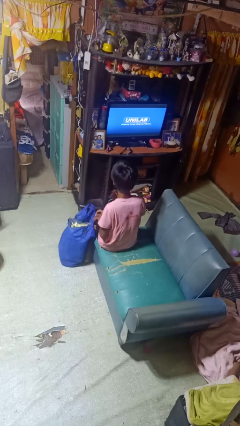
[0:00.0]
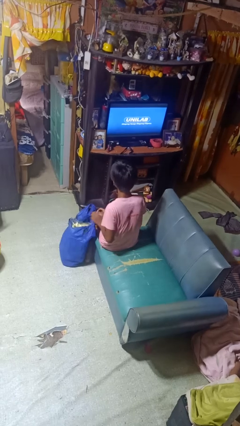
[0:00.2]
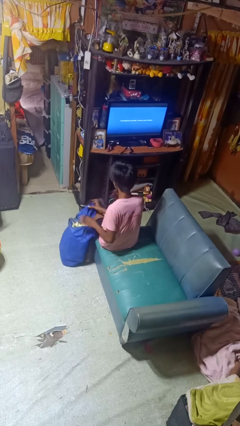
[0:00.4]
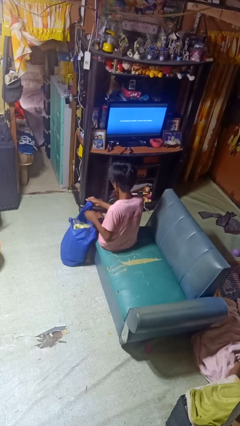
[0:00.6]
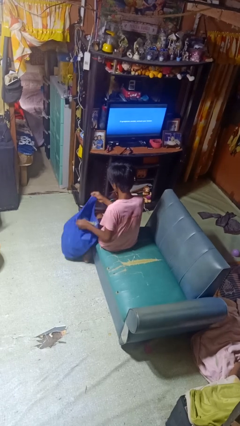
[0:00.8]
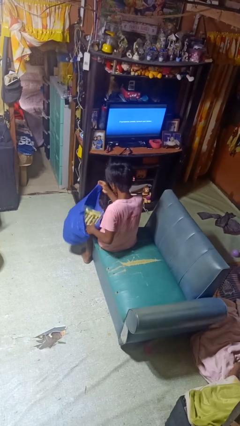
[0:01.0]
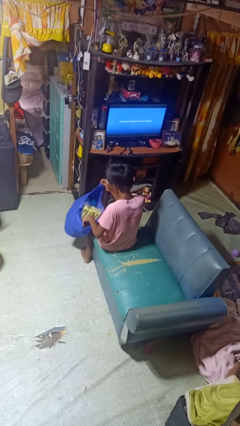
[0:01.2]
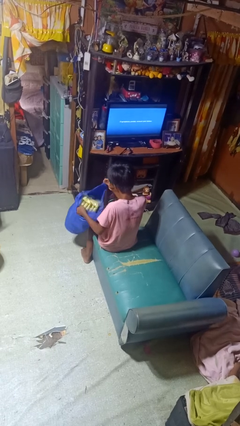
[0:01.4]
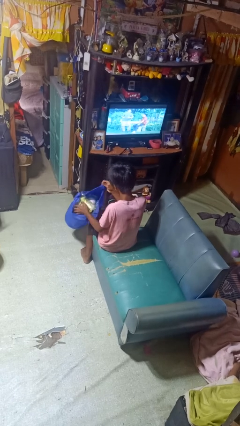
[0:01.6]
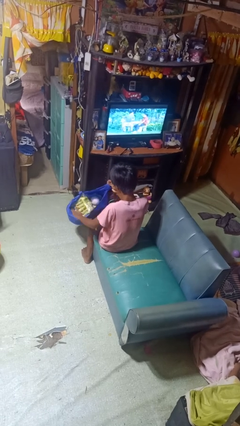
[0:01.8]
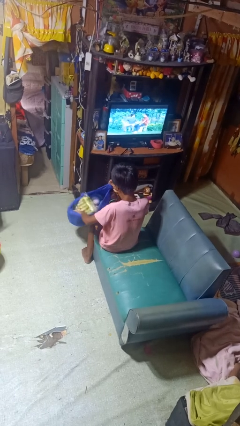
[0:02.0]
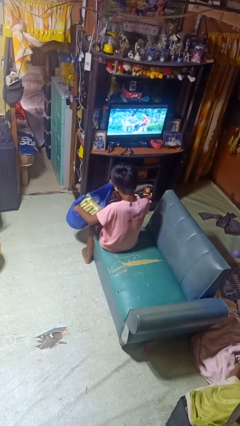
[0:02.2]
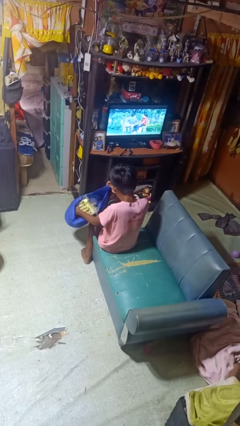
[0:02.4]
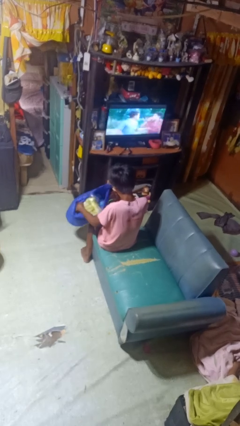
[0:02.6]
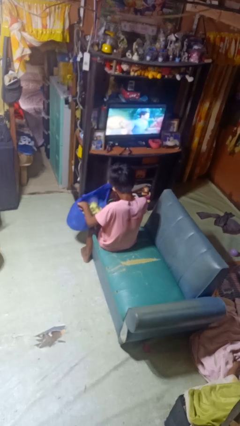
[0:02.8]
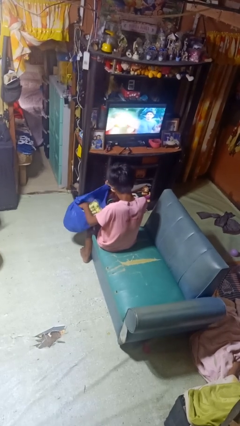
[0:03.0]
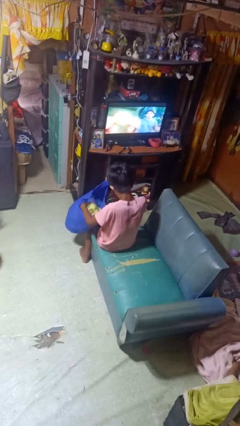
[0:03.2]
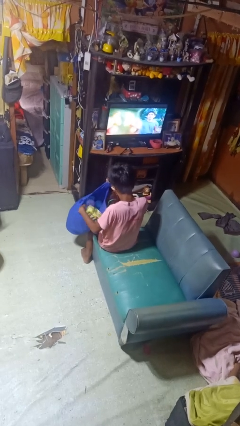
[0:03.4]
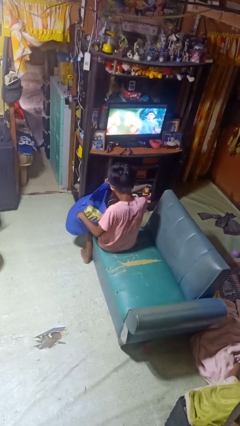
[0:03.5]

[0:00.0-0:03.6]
person searches in bag

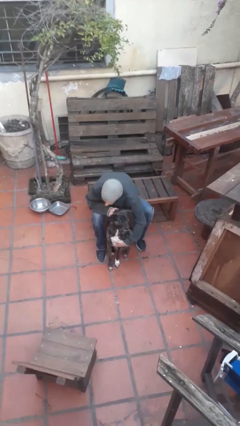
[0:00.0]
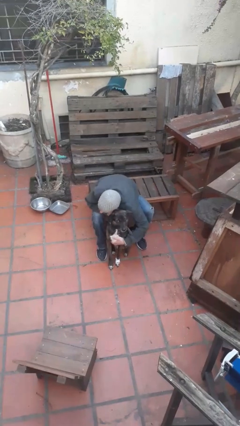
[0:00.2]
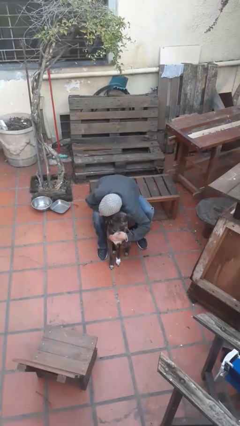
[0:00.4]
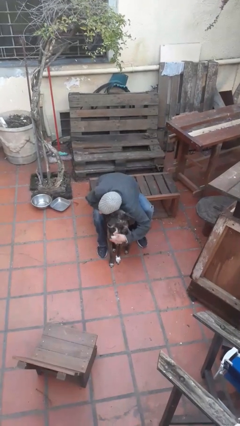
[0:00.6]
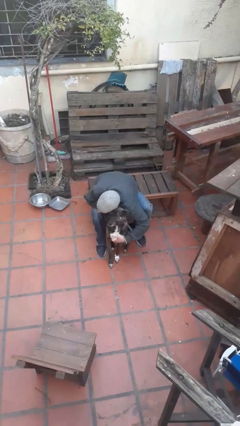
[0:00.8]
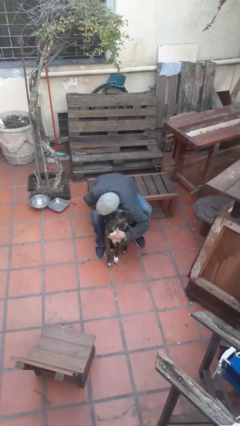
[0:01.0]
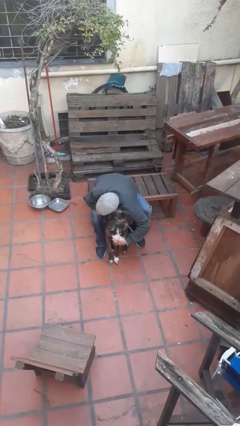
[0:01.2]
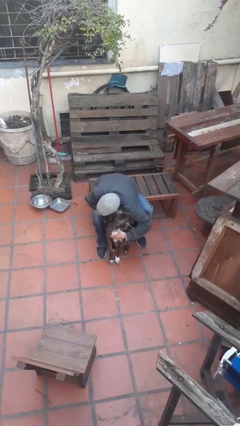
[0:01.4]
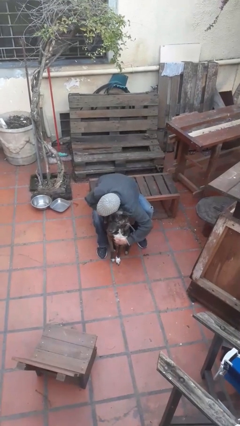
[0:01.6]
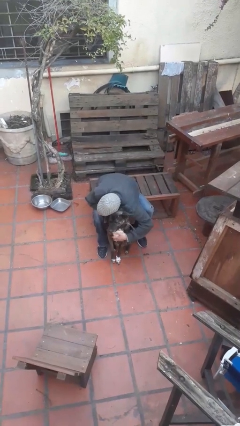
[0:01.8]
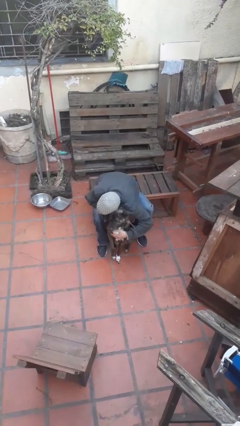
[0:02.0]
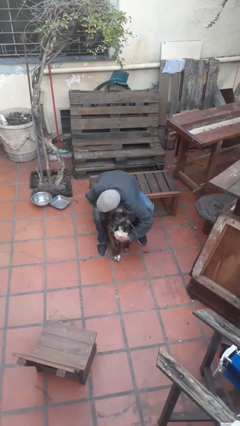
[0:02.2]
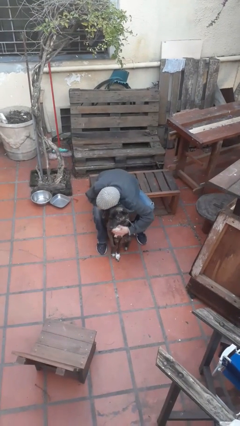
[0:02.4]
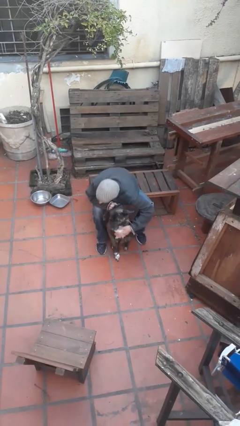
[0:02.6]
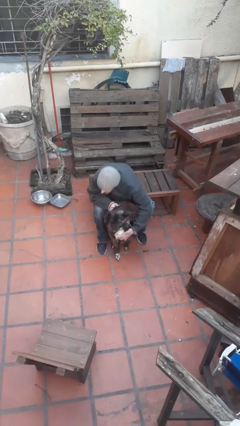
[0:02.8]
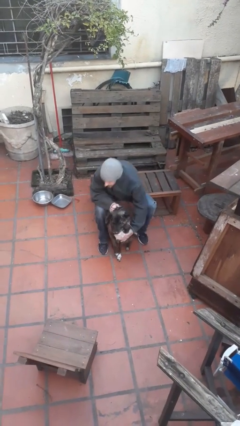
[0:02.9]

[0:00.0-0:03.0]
person hugs dog

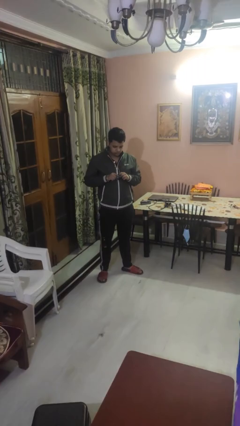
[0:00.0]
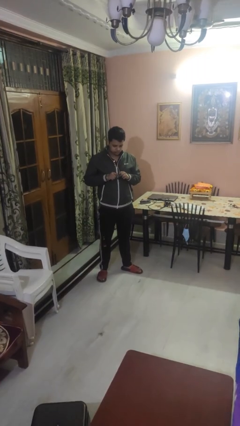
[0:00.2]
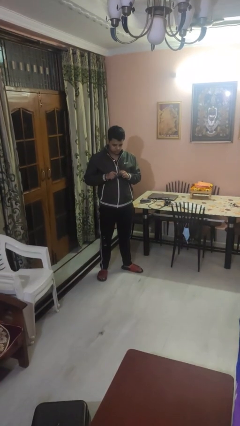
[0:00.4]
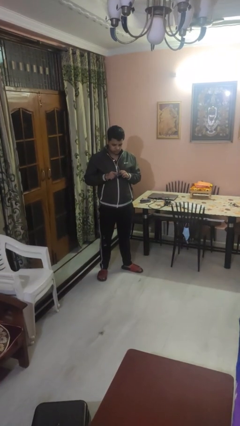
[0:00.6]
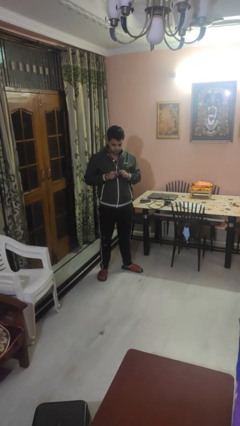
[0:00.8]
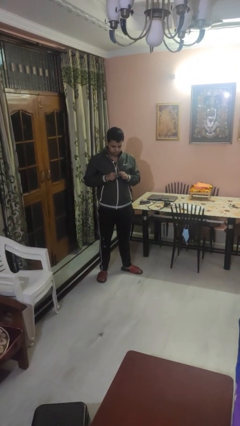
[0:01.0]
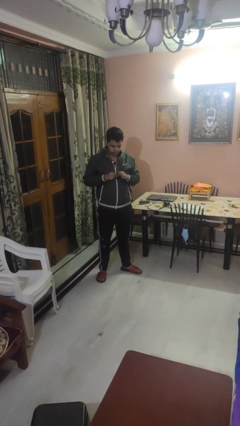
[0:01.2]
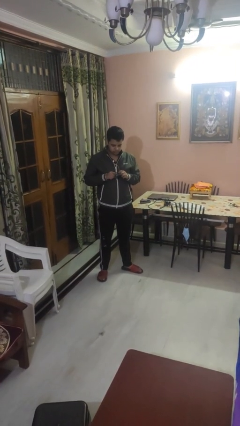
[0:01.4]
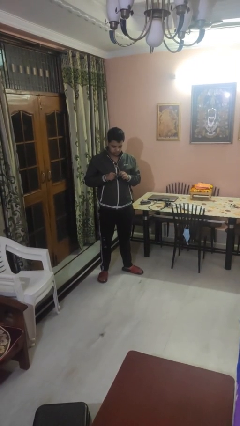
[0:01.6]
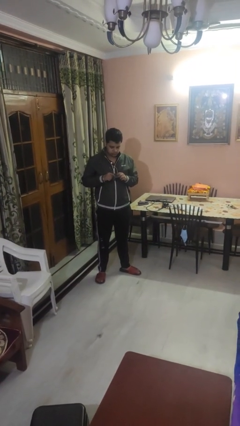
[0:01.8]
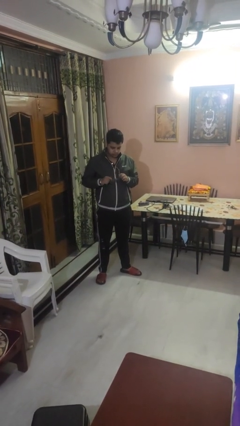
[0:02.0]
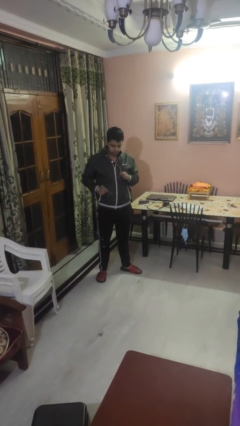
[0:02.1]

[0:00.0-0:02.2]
person cleans eyeglasses

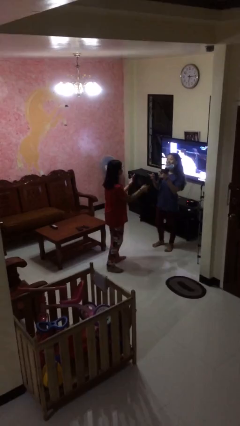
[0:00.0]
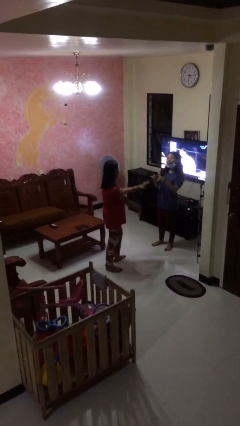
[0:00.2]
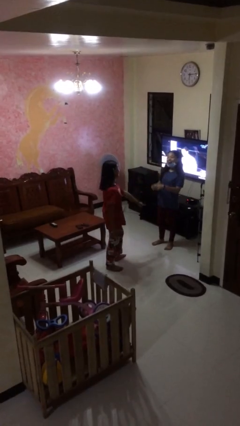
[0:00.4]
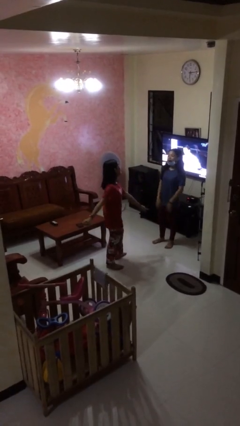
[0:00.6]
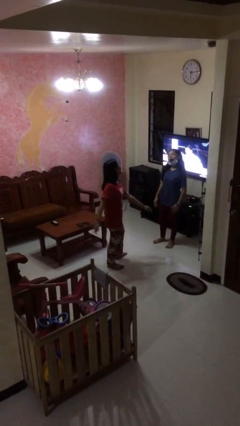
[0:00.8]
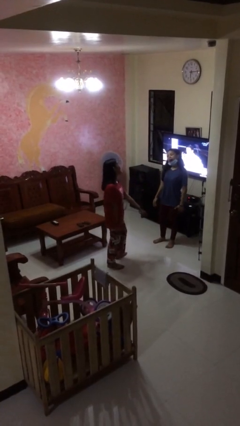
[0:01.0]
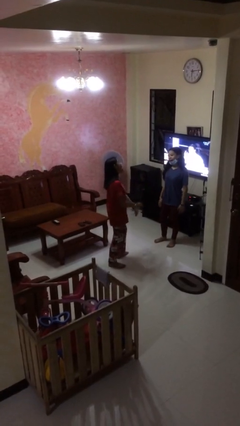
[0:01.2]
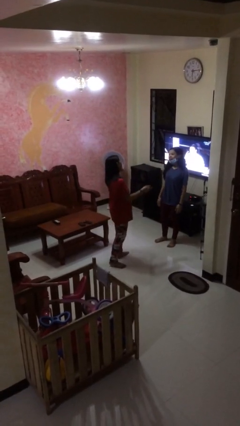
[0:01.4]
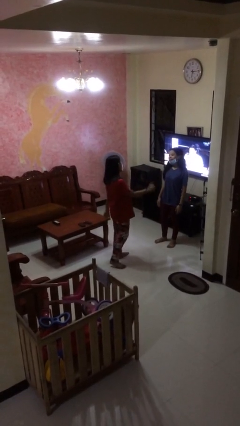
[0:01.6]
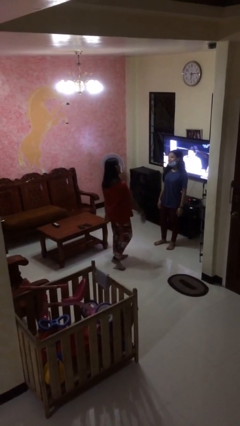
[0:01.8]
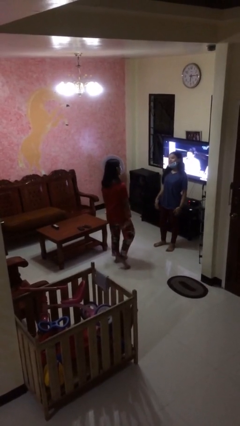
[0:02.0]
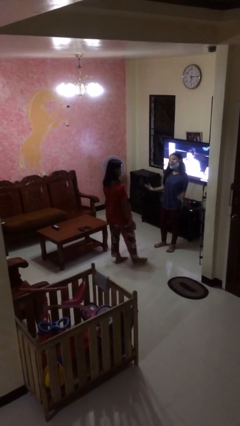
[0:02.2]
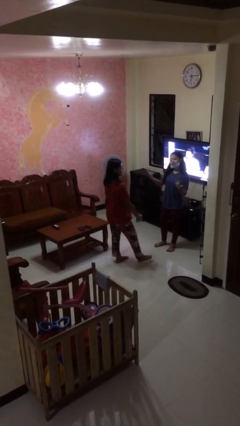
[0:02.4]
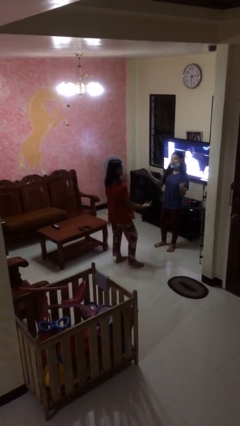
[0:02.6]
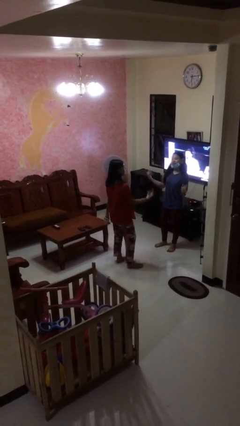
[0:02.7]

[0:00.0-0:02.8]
person talks to person

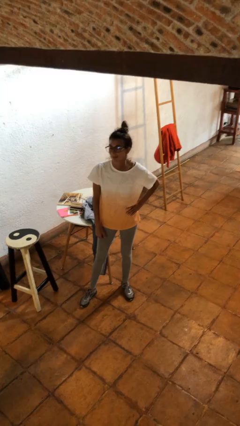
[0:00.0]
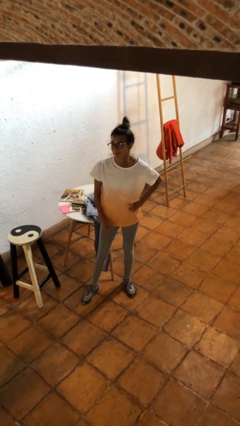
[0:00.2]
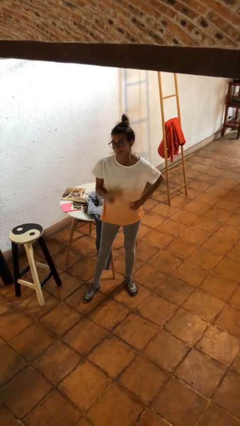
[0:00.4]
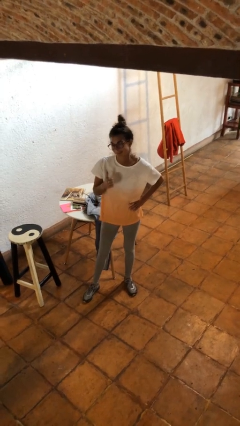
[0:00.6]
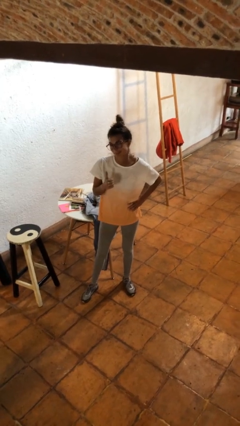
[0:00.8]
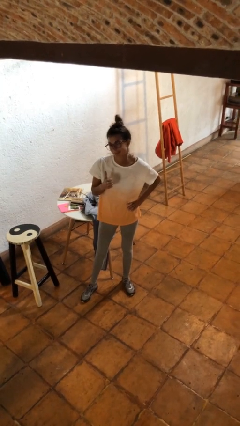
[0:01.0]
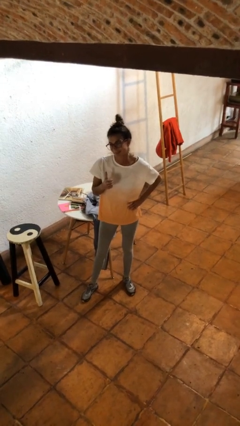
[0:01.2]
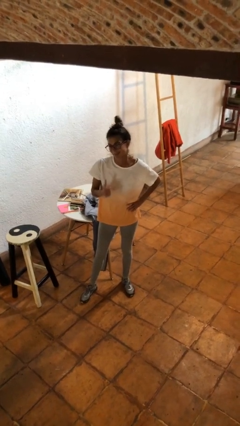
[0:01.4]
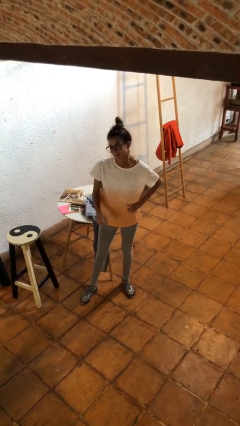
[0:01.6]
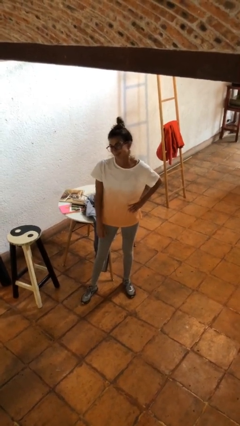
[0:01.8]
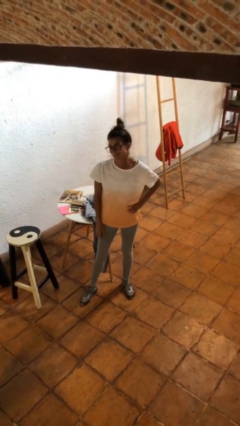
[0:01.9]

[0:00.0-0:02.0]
person gestures thumbs up

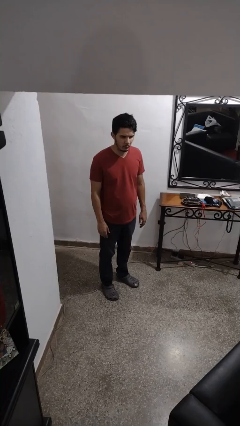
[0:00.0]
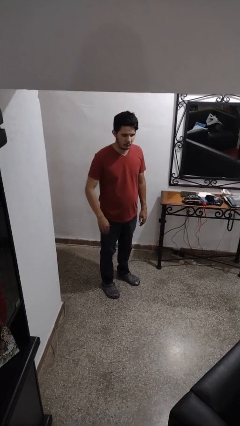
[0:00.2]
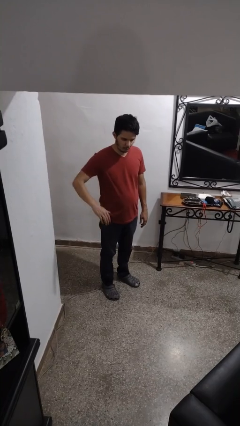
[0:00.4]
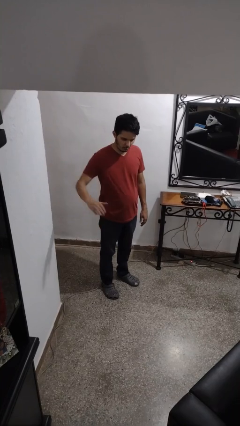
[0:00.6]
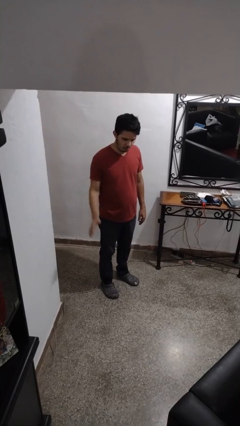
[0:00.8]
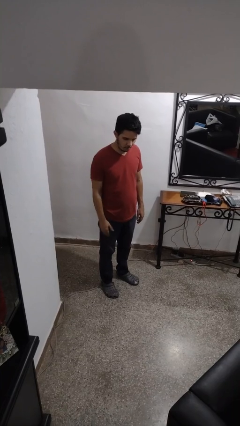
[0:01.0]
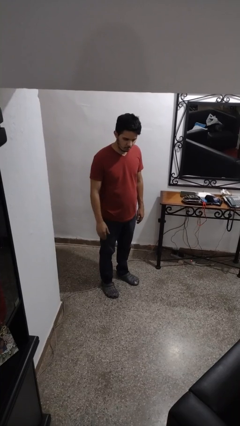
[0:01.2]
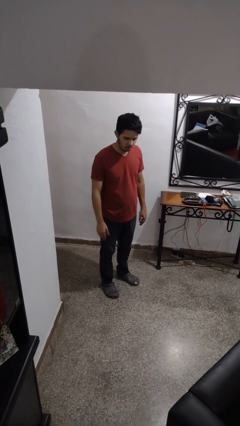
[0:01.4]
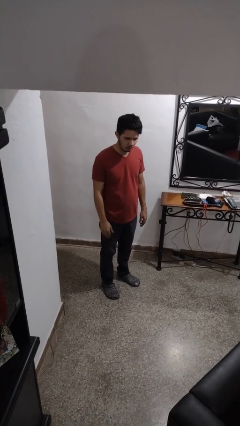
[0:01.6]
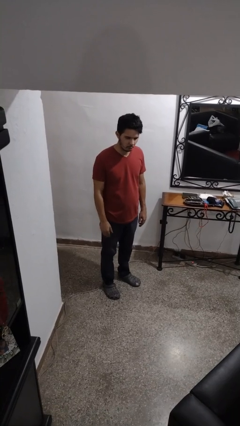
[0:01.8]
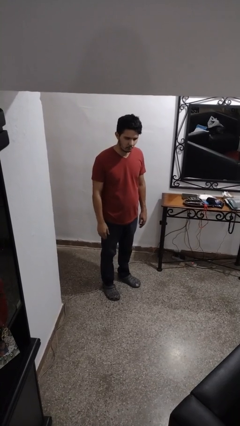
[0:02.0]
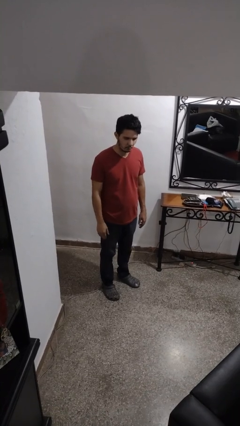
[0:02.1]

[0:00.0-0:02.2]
person slaps hands on thighs

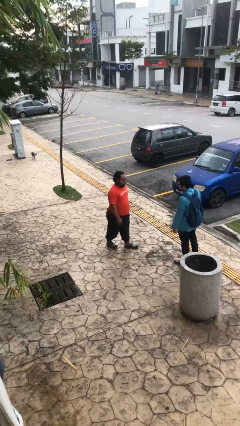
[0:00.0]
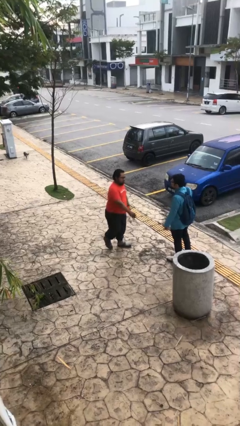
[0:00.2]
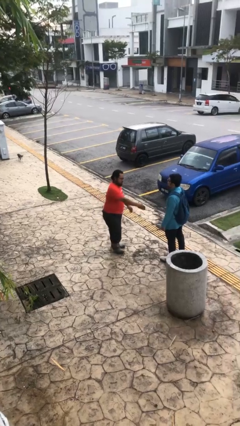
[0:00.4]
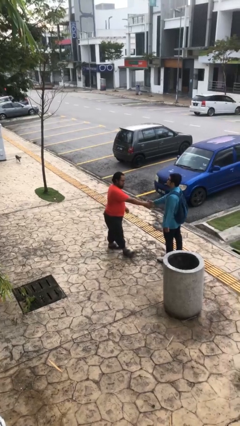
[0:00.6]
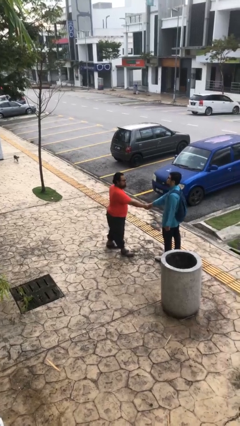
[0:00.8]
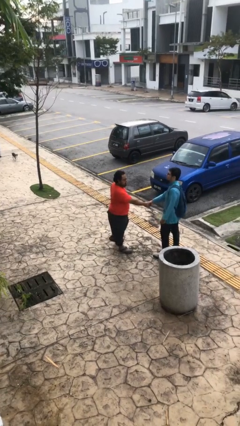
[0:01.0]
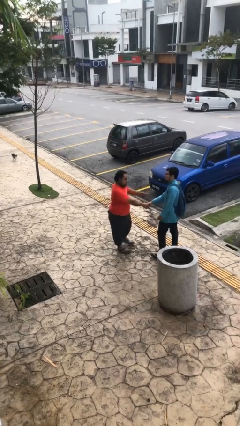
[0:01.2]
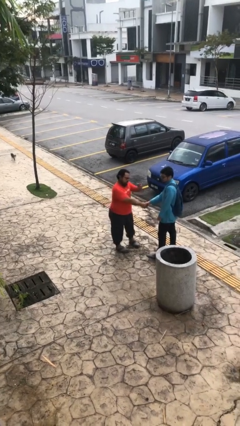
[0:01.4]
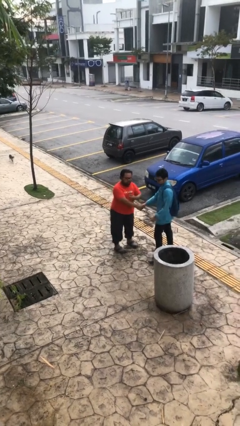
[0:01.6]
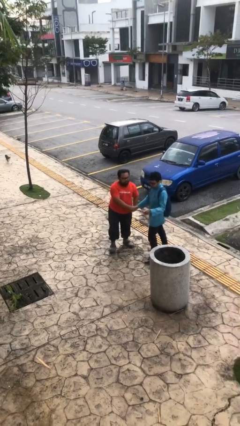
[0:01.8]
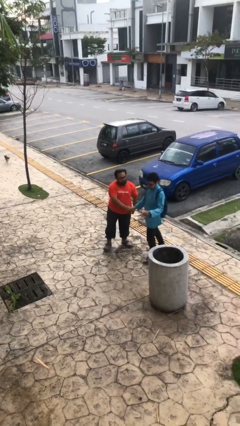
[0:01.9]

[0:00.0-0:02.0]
person shakes hand
